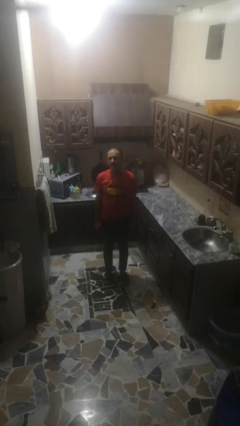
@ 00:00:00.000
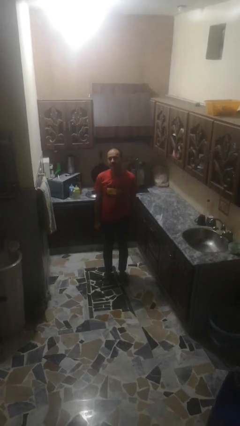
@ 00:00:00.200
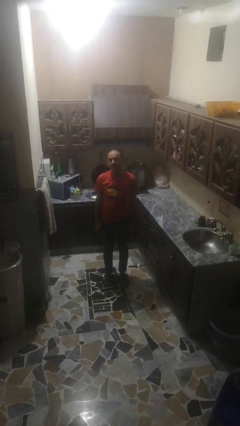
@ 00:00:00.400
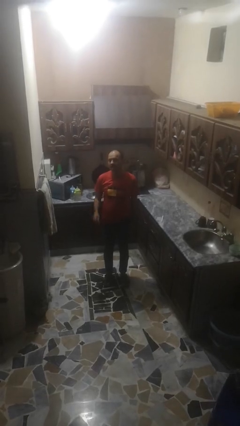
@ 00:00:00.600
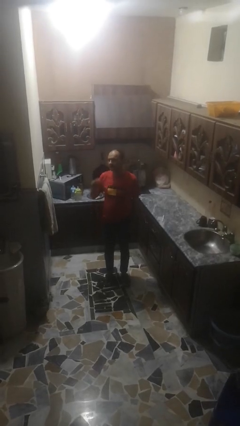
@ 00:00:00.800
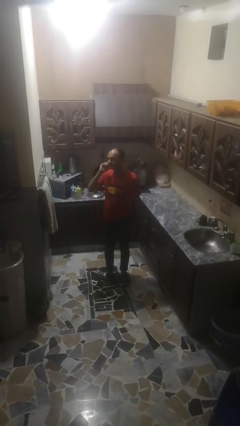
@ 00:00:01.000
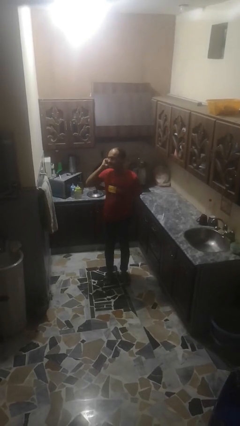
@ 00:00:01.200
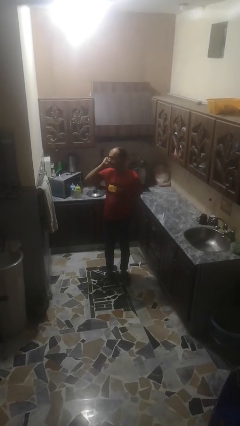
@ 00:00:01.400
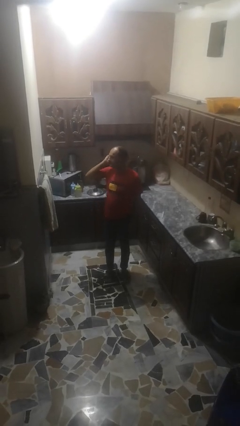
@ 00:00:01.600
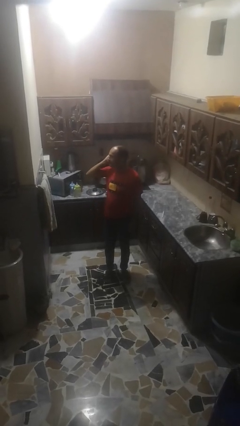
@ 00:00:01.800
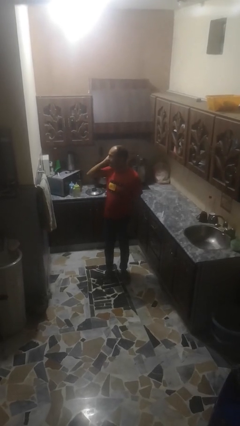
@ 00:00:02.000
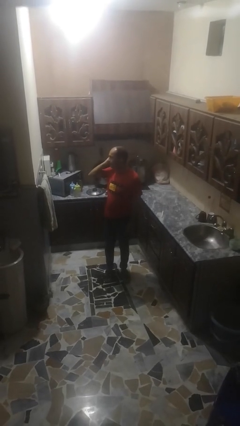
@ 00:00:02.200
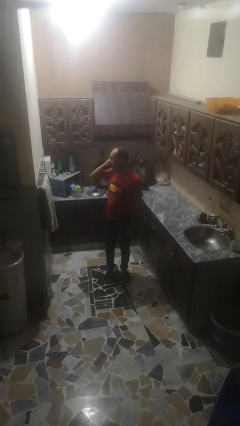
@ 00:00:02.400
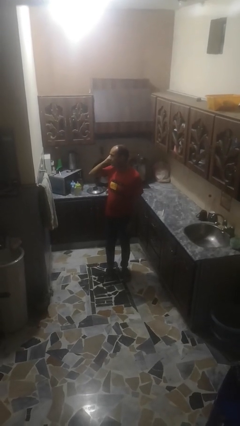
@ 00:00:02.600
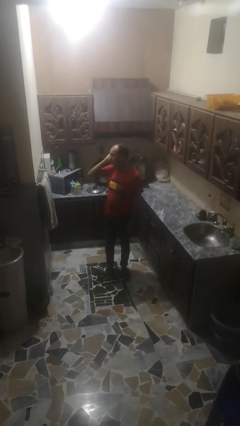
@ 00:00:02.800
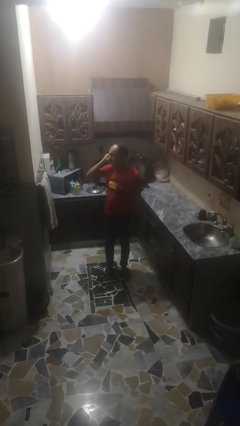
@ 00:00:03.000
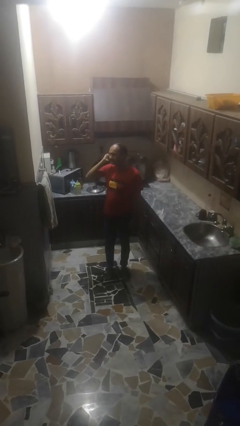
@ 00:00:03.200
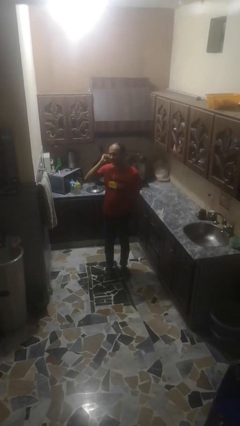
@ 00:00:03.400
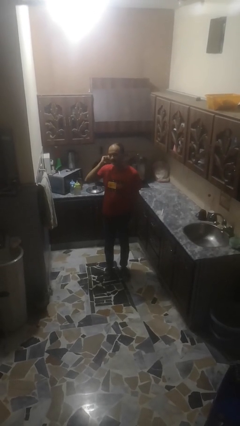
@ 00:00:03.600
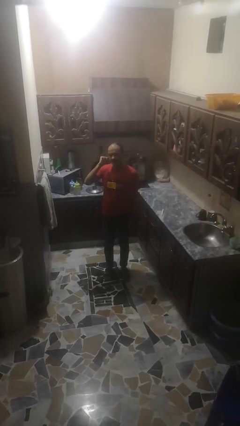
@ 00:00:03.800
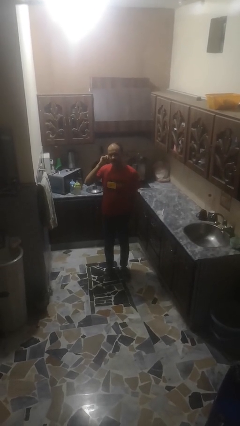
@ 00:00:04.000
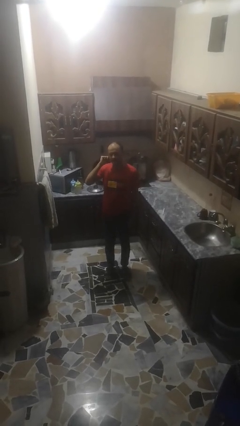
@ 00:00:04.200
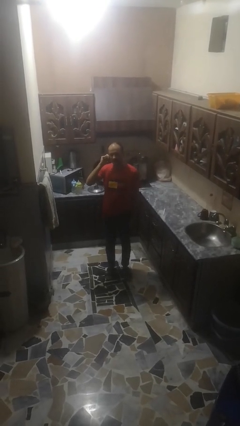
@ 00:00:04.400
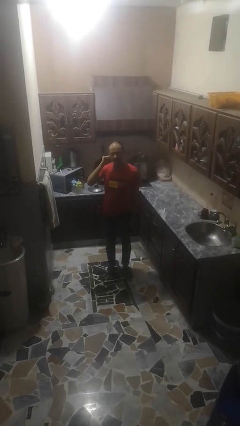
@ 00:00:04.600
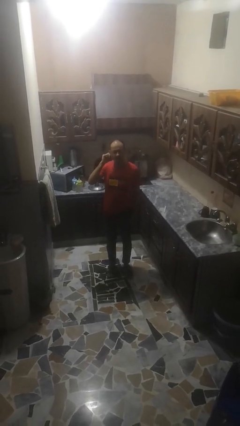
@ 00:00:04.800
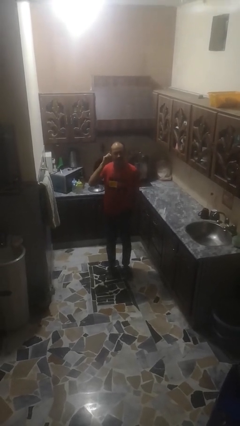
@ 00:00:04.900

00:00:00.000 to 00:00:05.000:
person touches earlobe

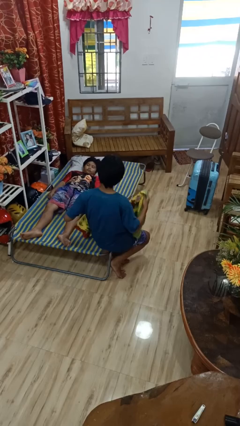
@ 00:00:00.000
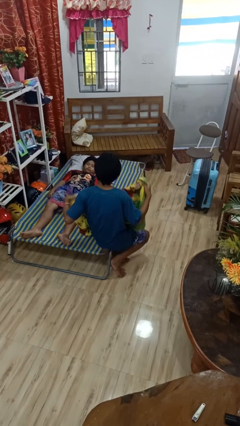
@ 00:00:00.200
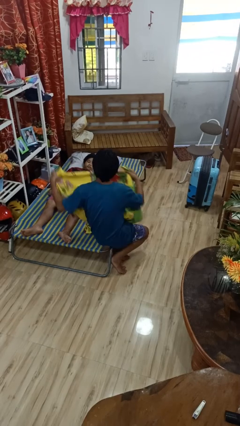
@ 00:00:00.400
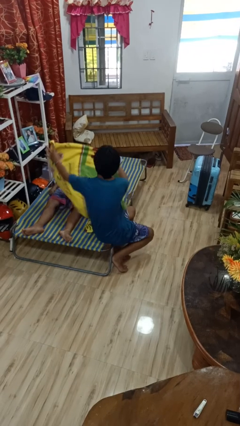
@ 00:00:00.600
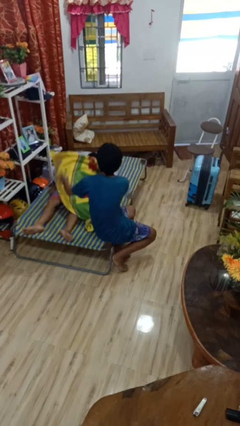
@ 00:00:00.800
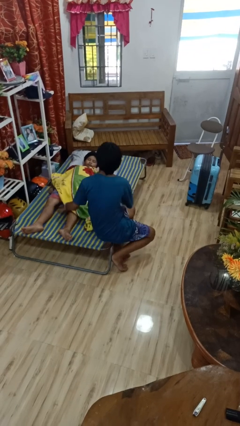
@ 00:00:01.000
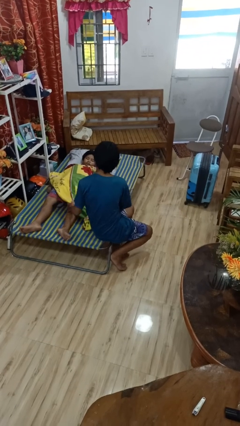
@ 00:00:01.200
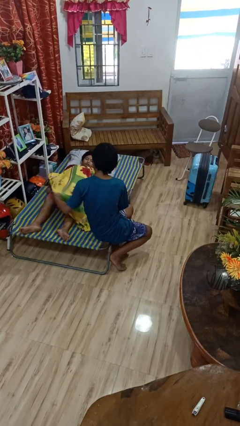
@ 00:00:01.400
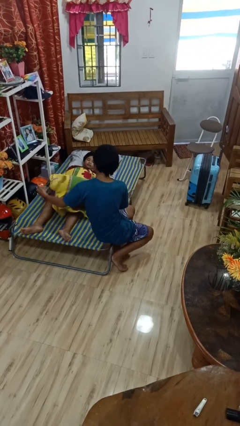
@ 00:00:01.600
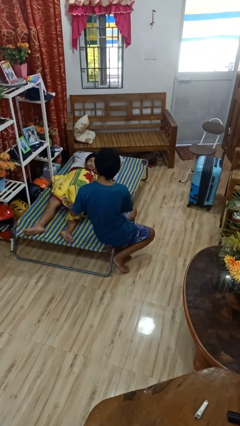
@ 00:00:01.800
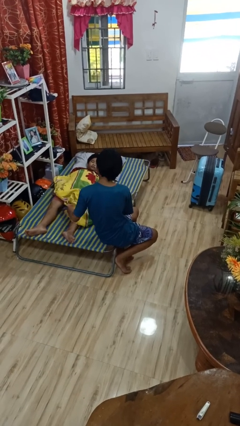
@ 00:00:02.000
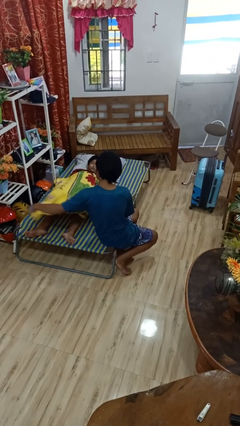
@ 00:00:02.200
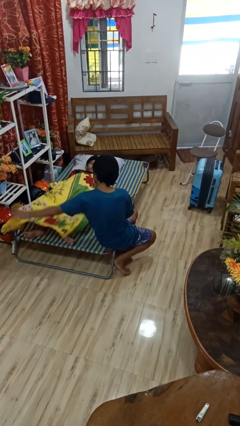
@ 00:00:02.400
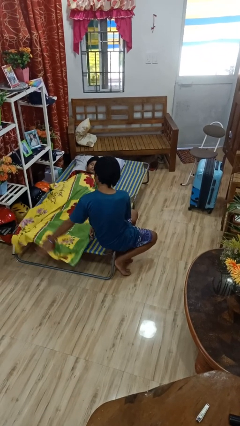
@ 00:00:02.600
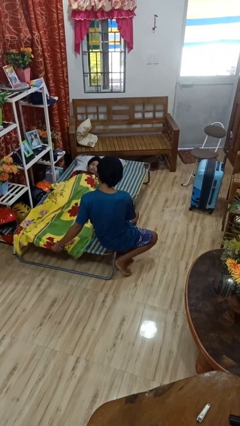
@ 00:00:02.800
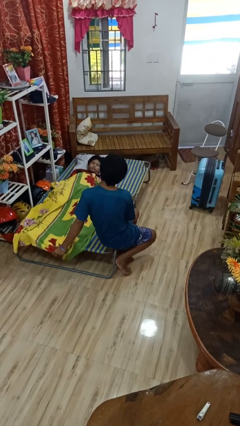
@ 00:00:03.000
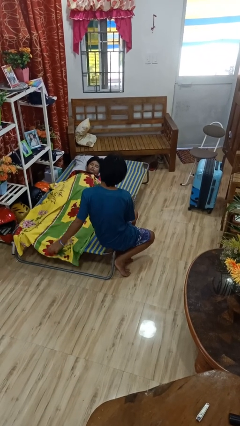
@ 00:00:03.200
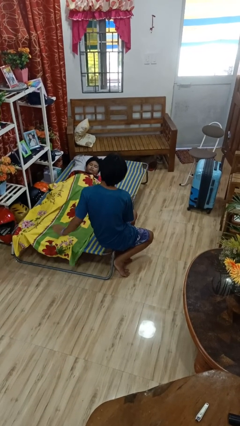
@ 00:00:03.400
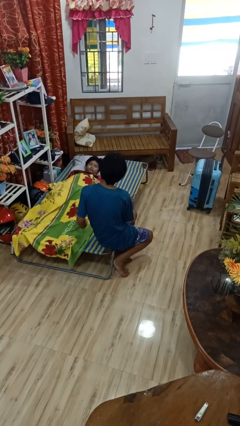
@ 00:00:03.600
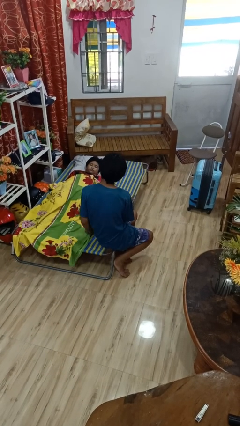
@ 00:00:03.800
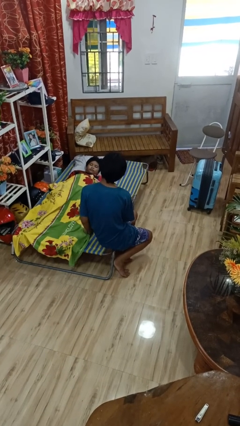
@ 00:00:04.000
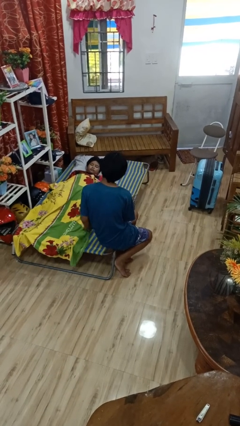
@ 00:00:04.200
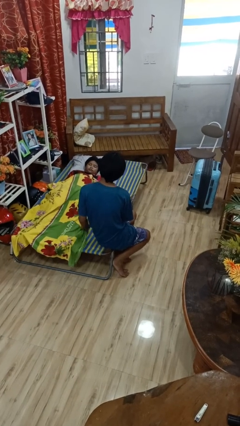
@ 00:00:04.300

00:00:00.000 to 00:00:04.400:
person covers friend with blanket

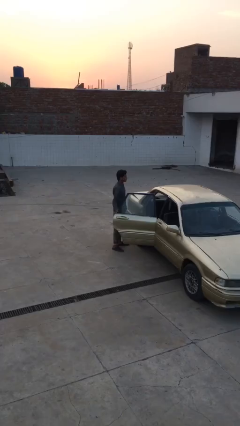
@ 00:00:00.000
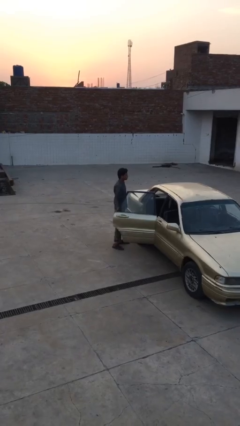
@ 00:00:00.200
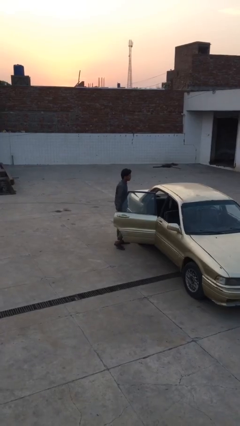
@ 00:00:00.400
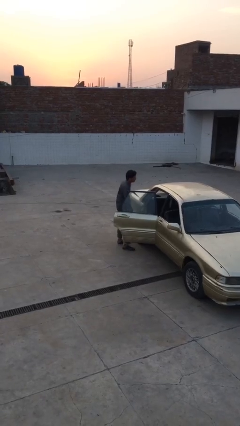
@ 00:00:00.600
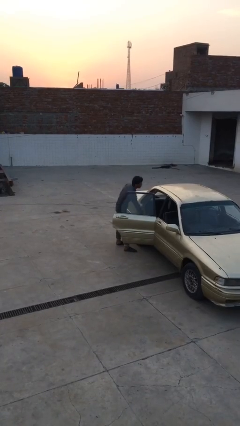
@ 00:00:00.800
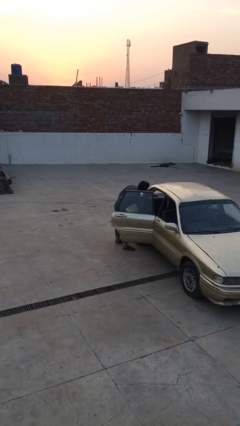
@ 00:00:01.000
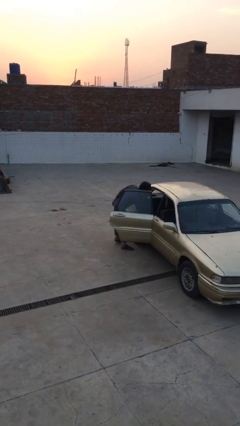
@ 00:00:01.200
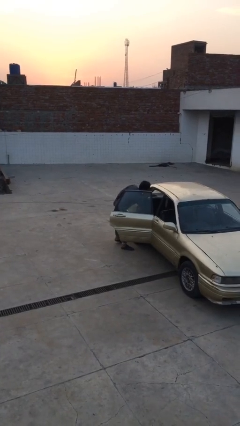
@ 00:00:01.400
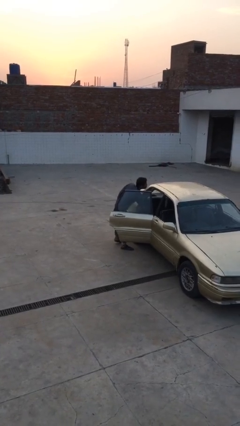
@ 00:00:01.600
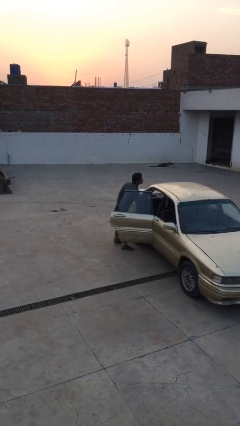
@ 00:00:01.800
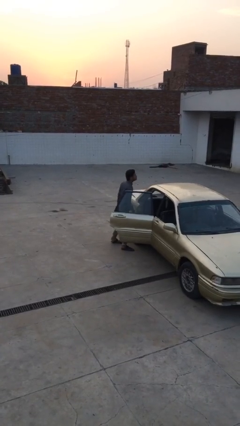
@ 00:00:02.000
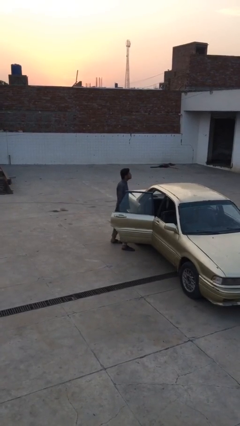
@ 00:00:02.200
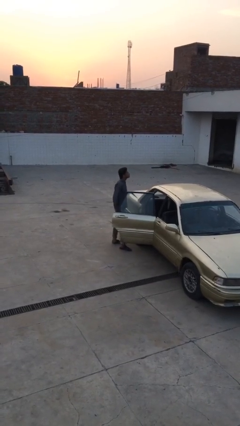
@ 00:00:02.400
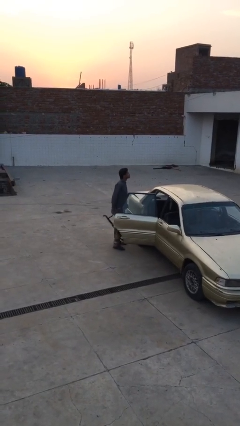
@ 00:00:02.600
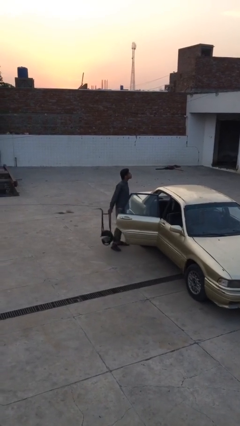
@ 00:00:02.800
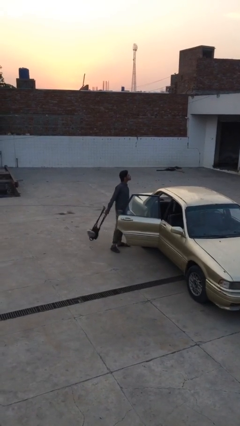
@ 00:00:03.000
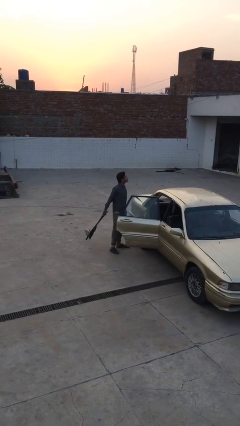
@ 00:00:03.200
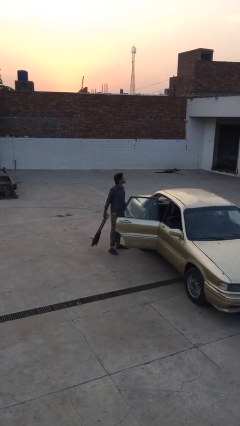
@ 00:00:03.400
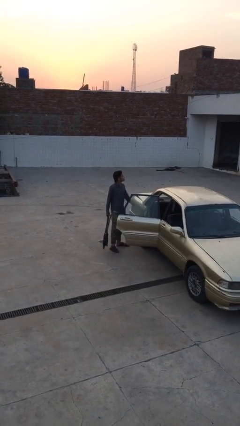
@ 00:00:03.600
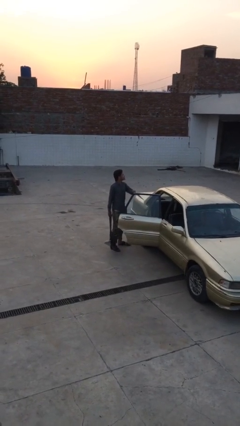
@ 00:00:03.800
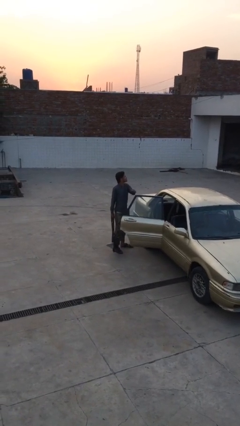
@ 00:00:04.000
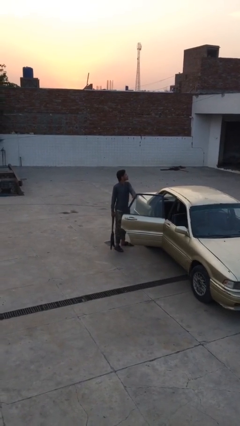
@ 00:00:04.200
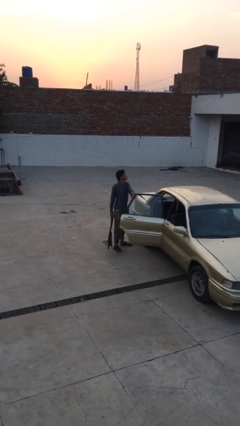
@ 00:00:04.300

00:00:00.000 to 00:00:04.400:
person unloads car

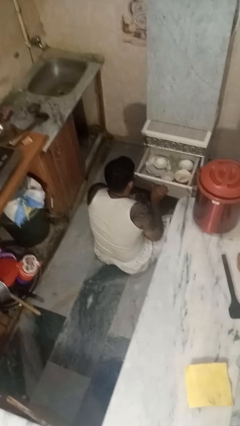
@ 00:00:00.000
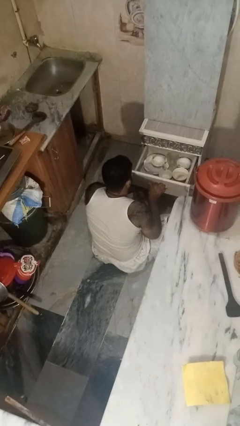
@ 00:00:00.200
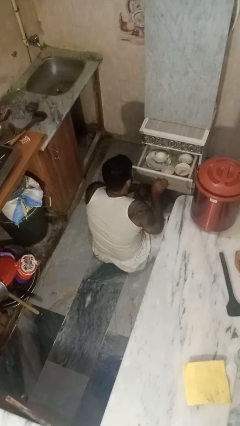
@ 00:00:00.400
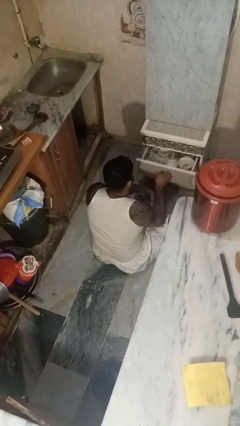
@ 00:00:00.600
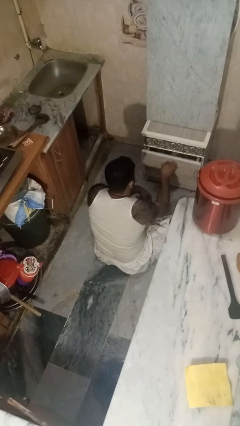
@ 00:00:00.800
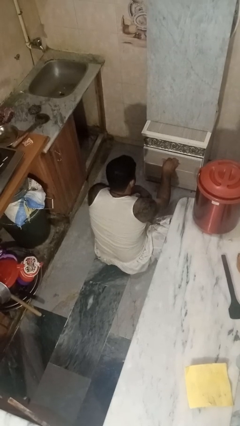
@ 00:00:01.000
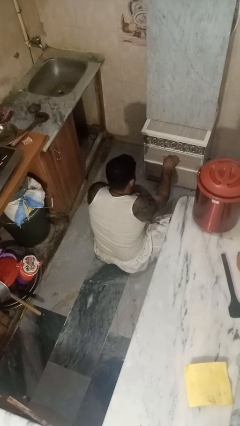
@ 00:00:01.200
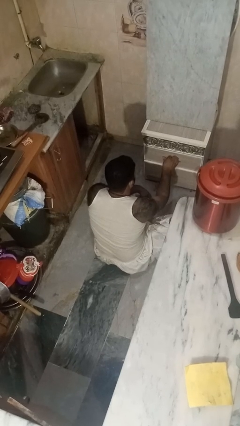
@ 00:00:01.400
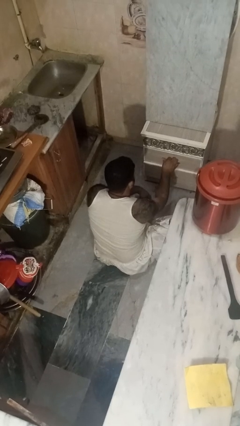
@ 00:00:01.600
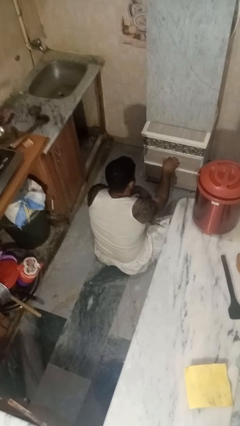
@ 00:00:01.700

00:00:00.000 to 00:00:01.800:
person closes kitchen drawer

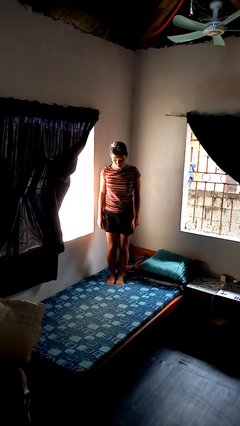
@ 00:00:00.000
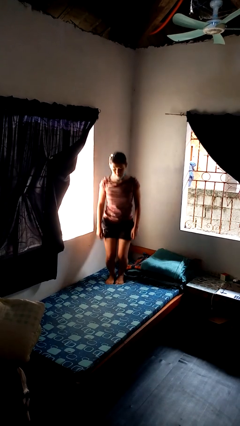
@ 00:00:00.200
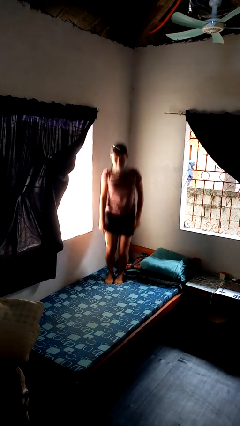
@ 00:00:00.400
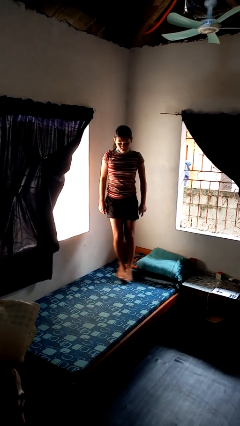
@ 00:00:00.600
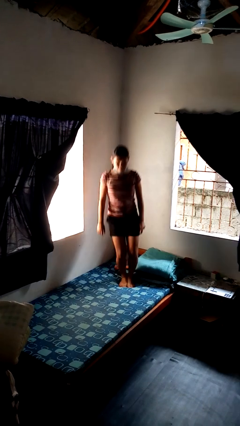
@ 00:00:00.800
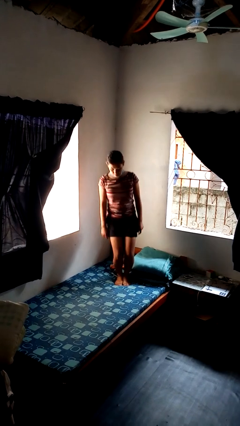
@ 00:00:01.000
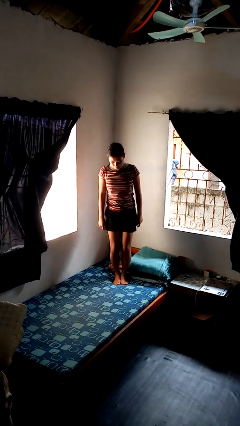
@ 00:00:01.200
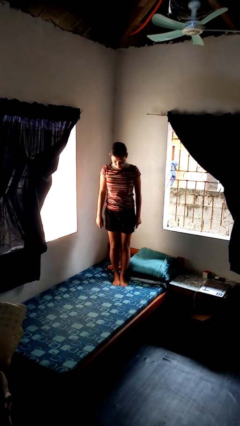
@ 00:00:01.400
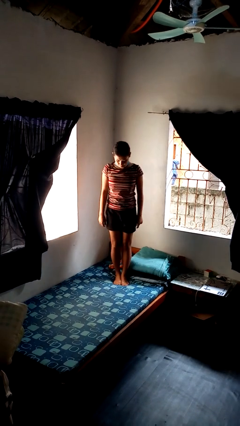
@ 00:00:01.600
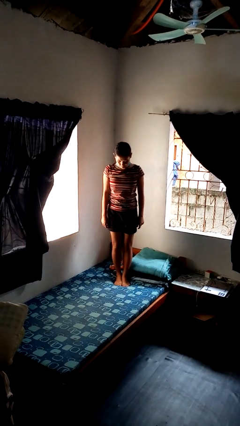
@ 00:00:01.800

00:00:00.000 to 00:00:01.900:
person jumps on bed
